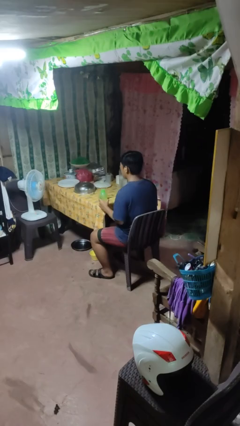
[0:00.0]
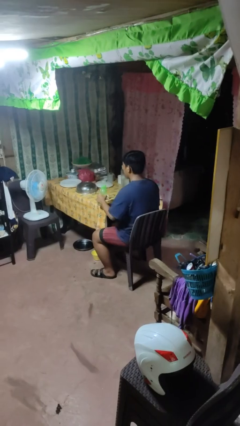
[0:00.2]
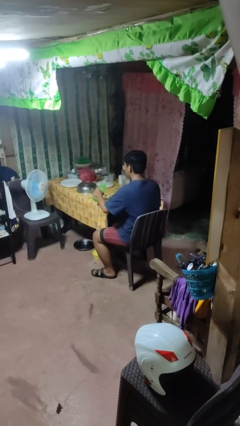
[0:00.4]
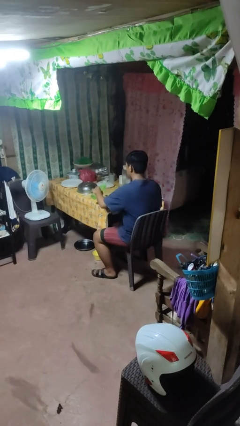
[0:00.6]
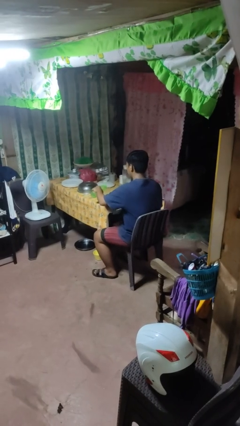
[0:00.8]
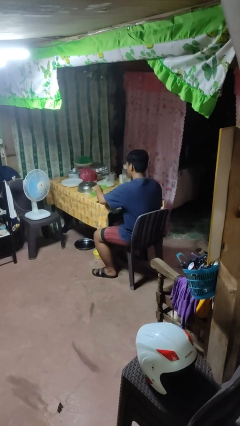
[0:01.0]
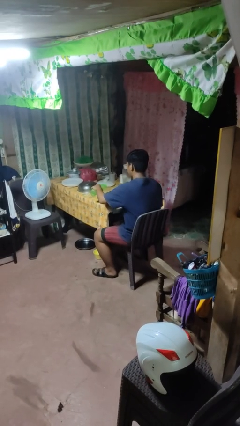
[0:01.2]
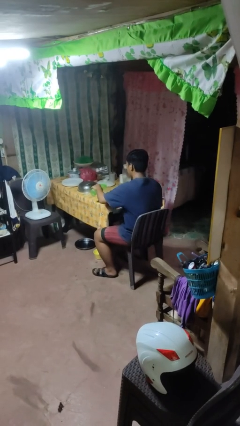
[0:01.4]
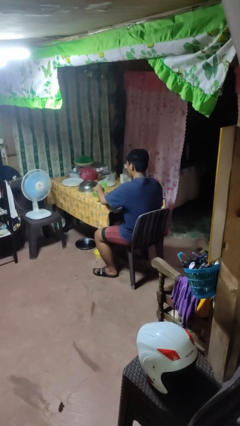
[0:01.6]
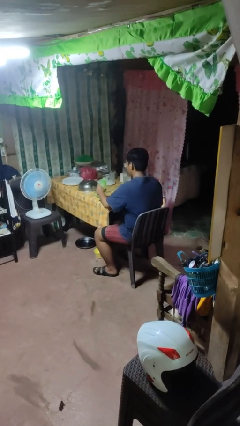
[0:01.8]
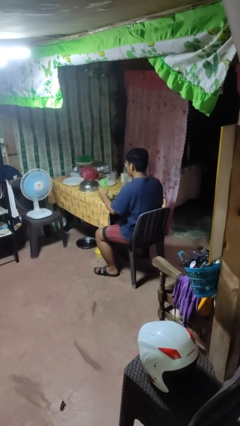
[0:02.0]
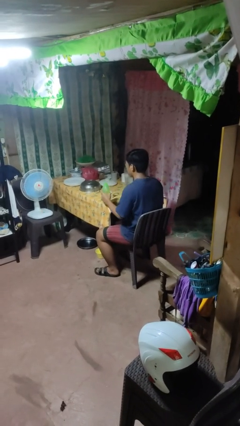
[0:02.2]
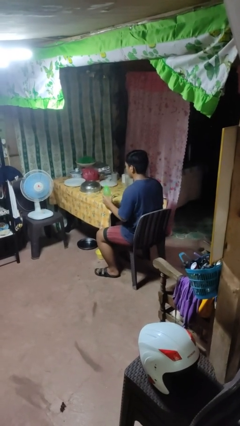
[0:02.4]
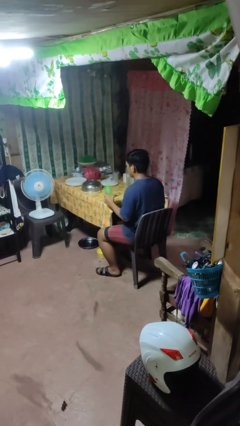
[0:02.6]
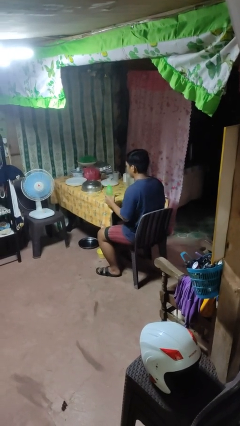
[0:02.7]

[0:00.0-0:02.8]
person pours liquid into cup

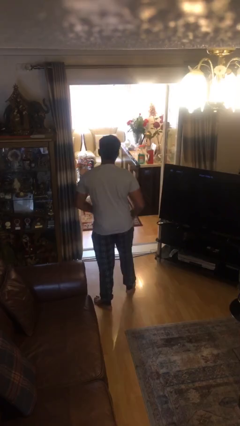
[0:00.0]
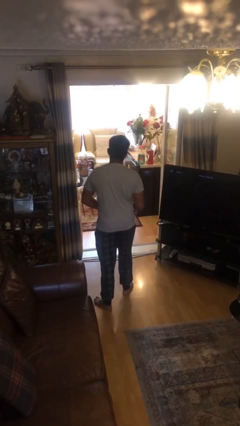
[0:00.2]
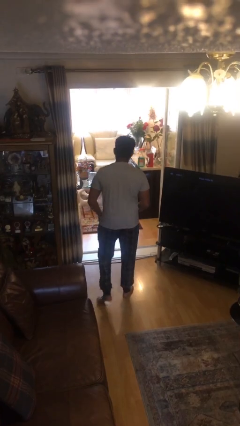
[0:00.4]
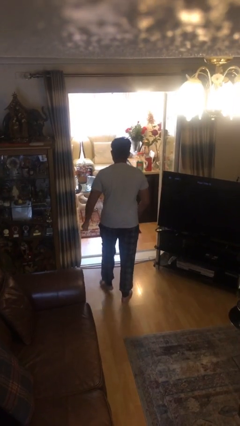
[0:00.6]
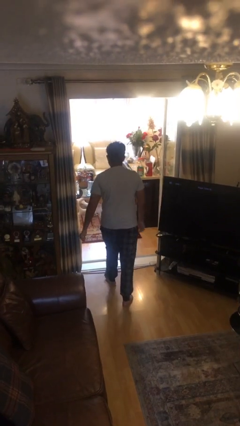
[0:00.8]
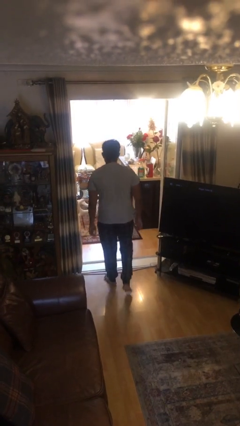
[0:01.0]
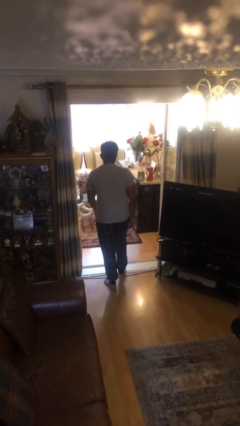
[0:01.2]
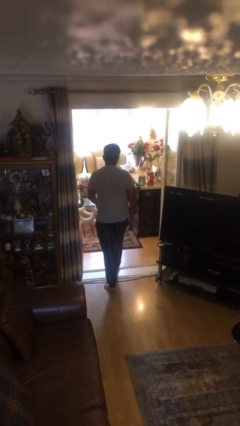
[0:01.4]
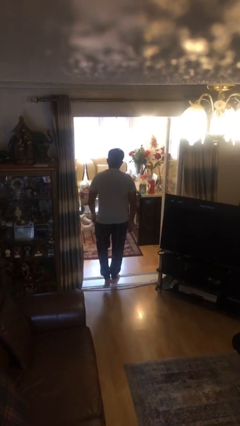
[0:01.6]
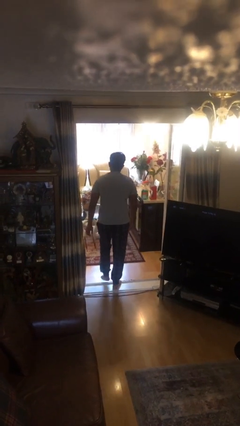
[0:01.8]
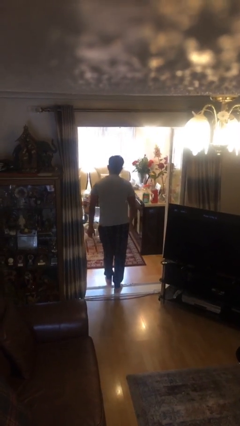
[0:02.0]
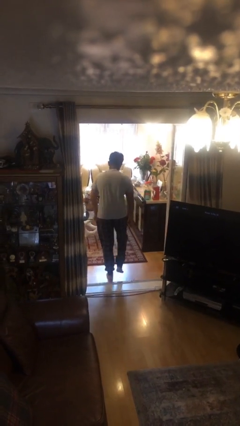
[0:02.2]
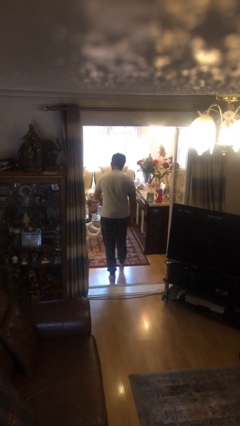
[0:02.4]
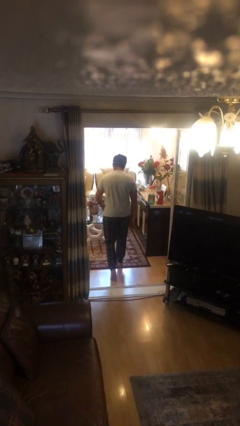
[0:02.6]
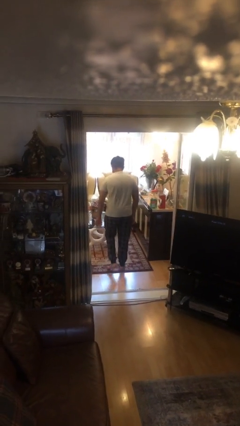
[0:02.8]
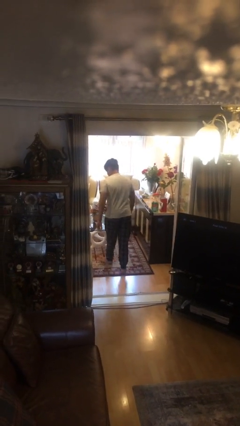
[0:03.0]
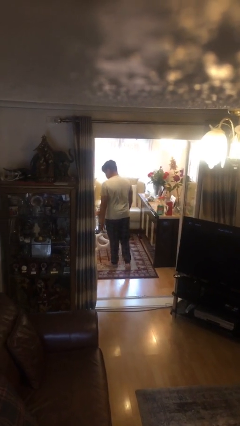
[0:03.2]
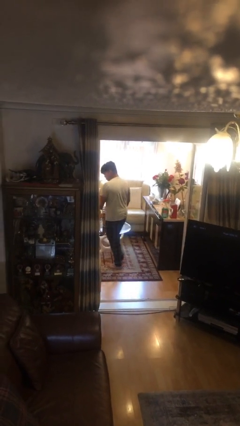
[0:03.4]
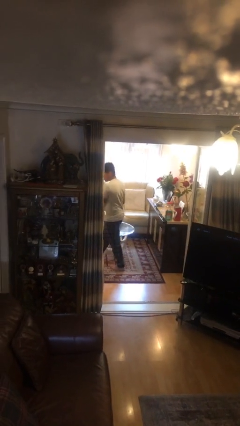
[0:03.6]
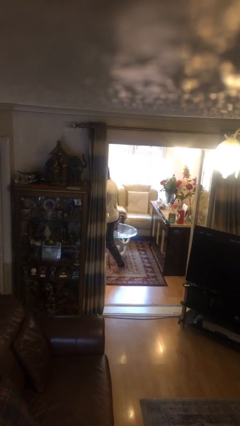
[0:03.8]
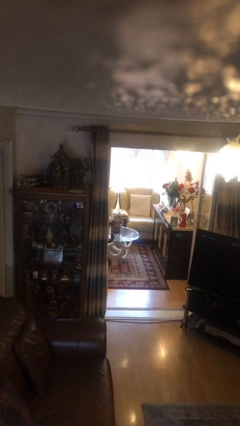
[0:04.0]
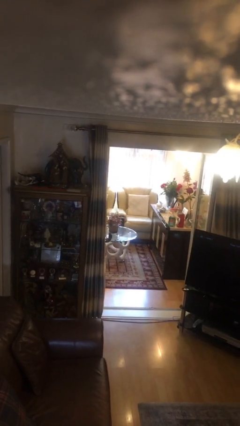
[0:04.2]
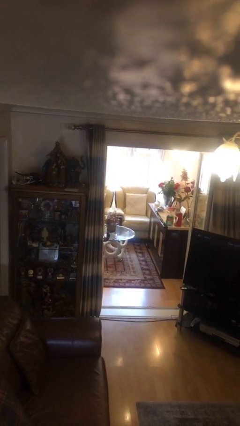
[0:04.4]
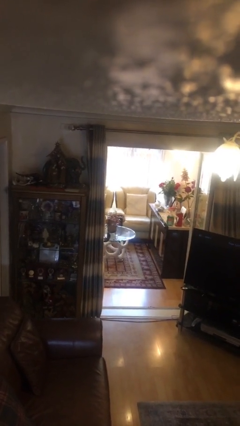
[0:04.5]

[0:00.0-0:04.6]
person exits scene through structure

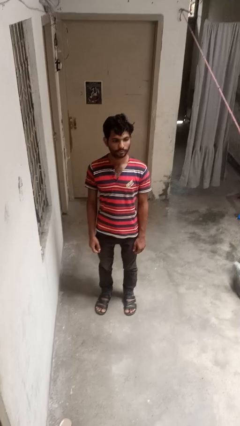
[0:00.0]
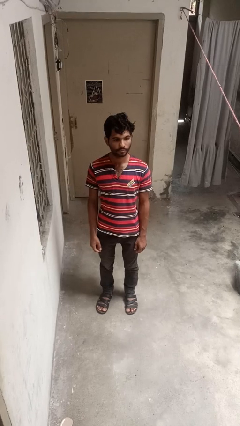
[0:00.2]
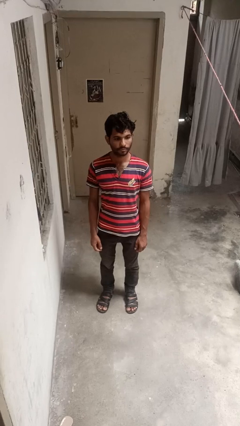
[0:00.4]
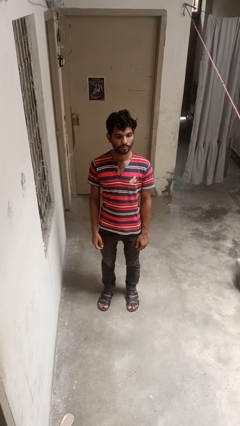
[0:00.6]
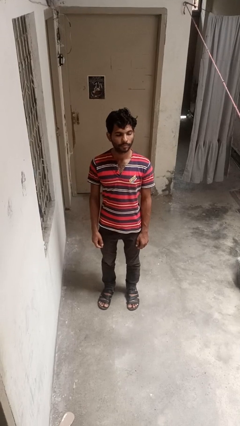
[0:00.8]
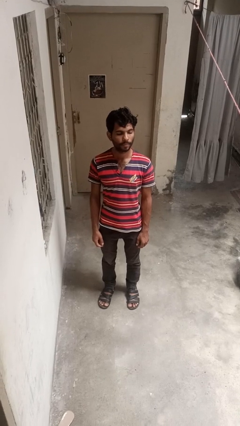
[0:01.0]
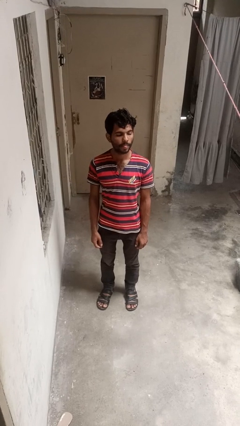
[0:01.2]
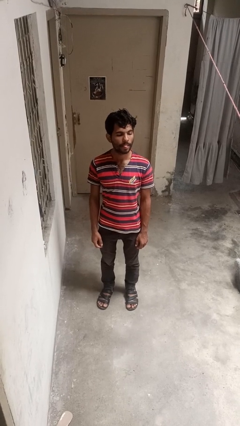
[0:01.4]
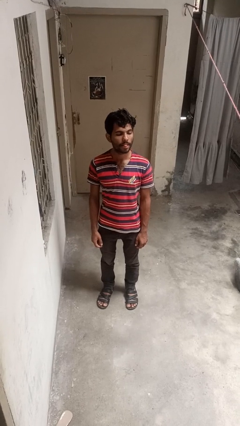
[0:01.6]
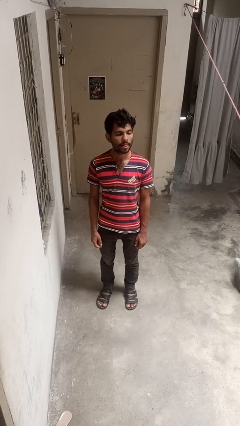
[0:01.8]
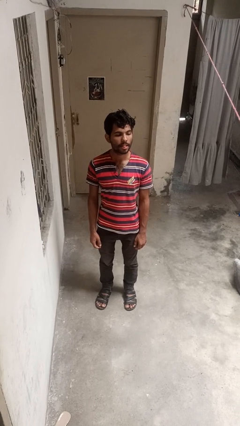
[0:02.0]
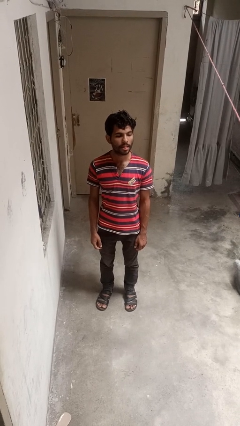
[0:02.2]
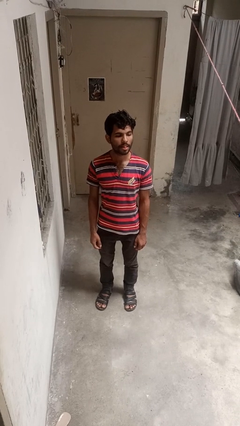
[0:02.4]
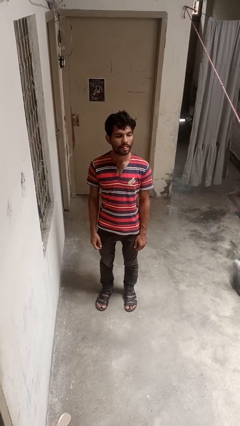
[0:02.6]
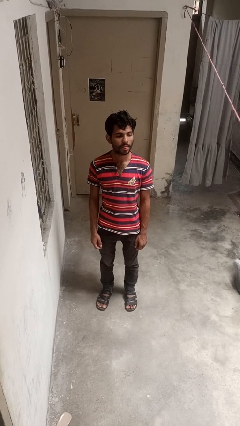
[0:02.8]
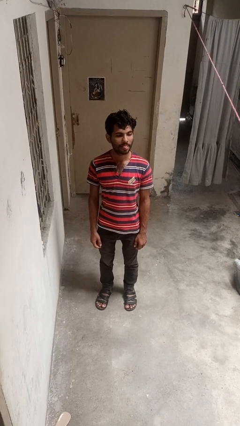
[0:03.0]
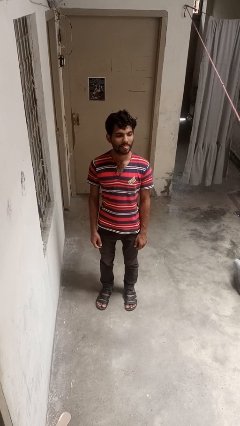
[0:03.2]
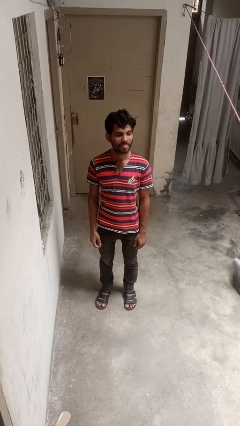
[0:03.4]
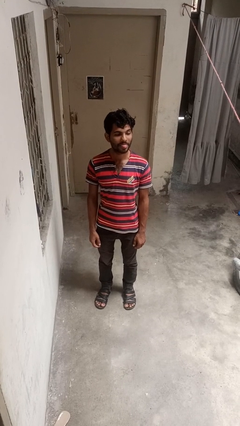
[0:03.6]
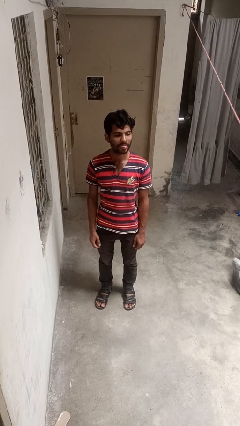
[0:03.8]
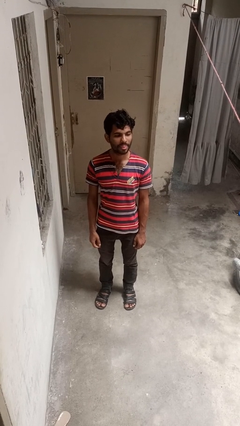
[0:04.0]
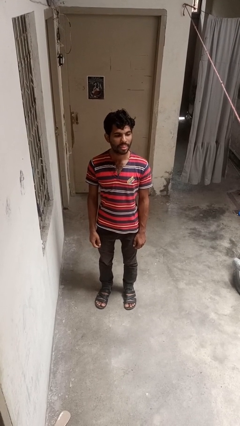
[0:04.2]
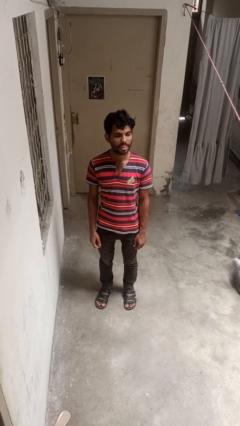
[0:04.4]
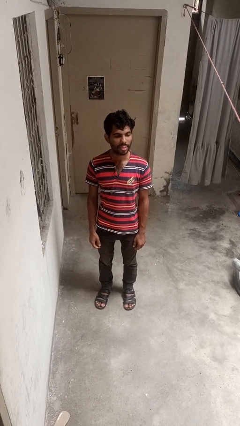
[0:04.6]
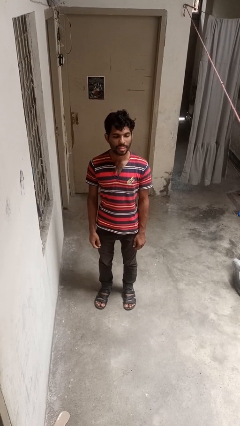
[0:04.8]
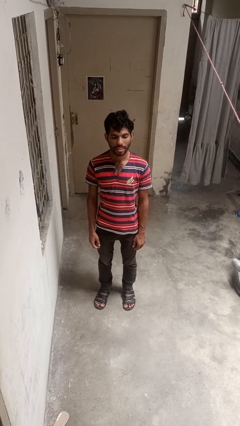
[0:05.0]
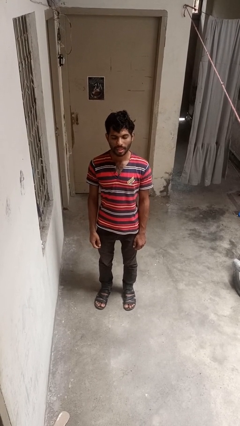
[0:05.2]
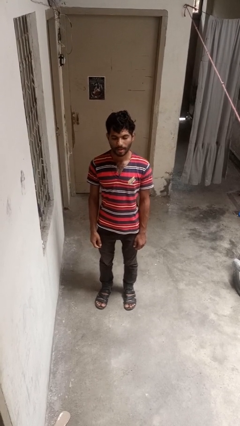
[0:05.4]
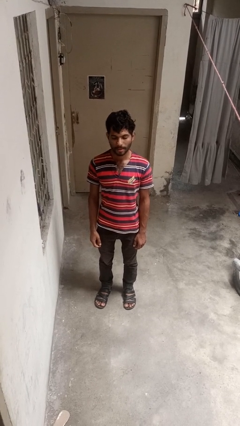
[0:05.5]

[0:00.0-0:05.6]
person sticks out tongue

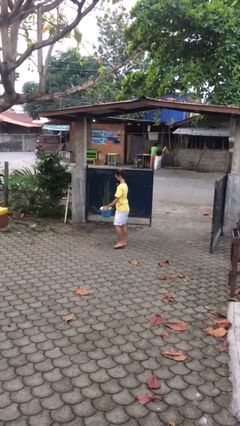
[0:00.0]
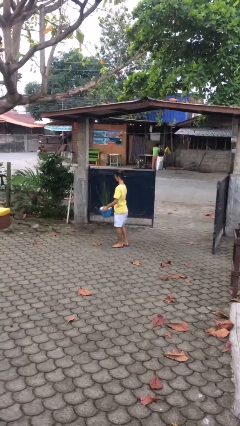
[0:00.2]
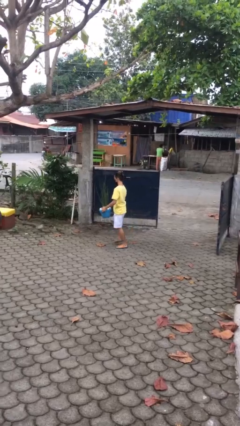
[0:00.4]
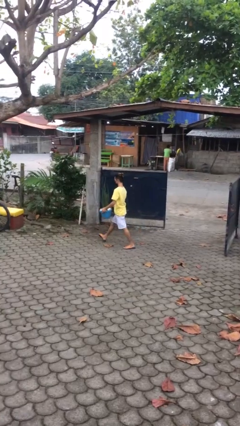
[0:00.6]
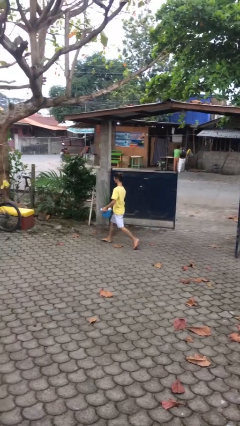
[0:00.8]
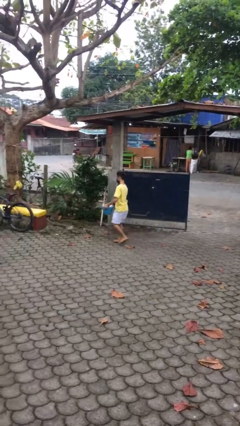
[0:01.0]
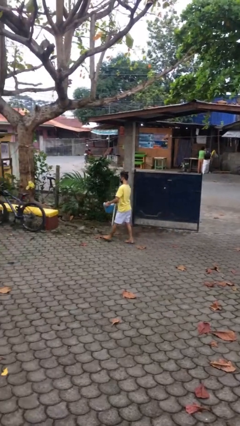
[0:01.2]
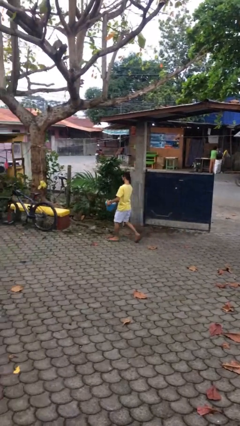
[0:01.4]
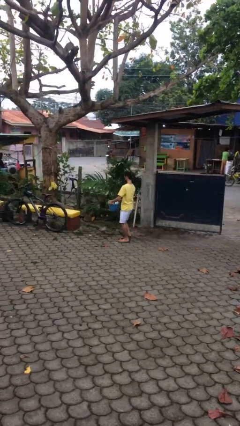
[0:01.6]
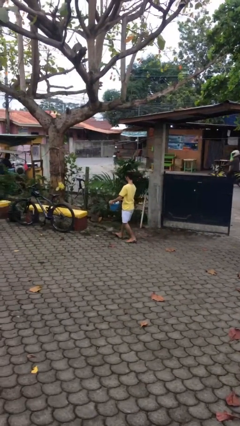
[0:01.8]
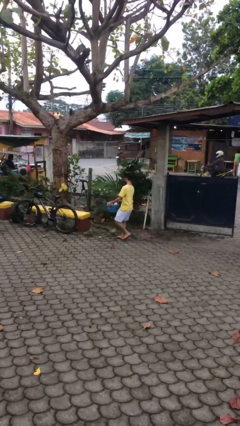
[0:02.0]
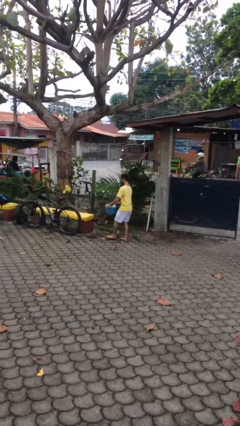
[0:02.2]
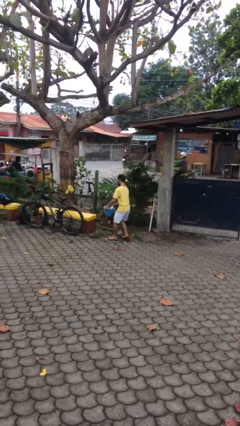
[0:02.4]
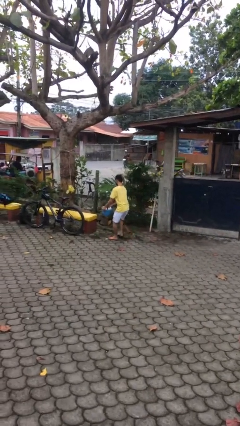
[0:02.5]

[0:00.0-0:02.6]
person carries heavy object

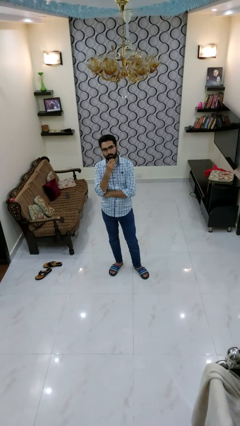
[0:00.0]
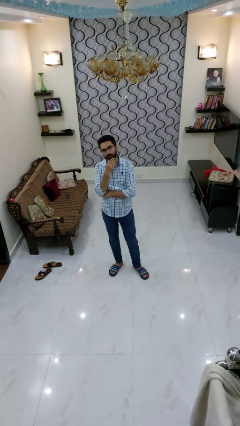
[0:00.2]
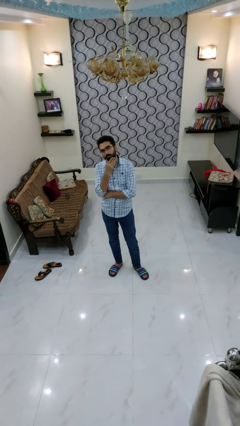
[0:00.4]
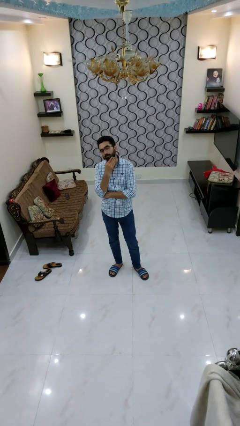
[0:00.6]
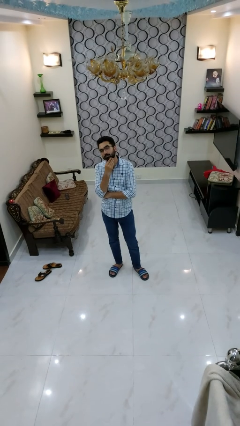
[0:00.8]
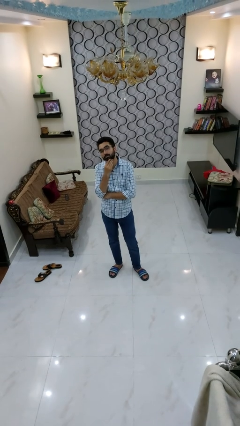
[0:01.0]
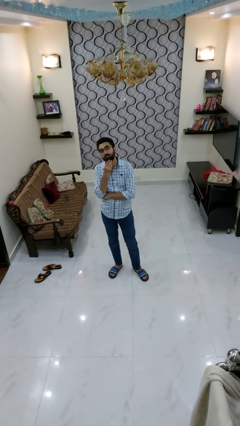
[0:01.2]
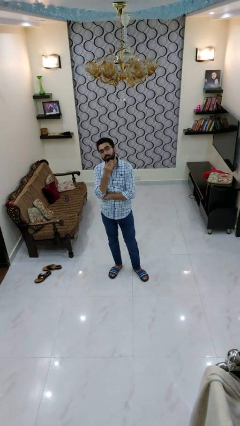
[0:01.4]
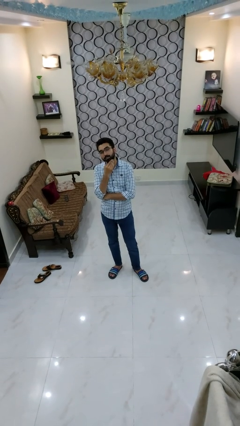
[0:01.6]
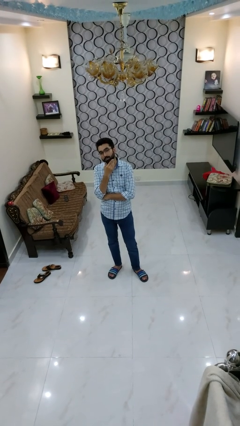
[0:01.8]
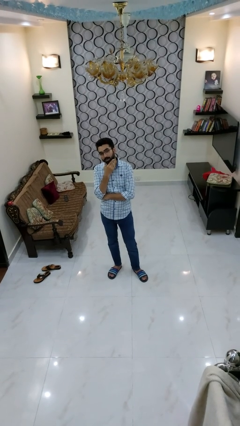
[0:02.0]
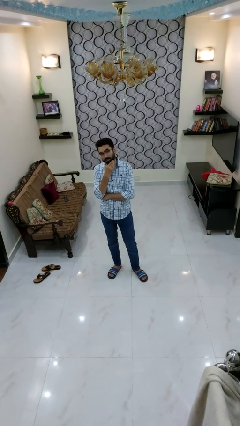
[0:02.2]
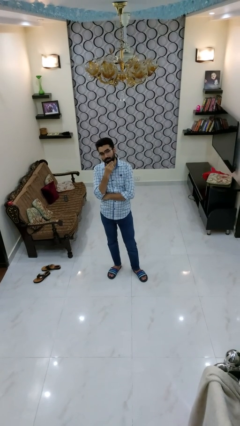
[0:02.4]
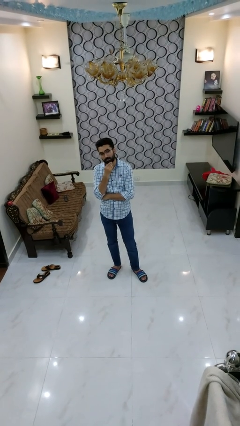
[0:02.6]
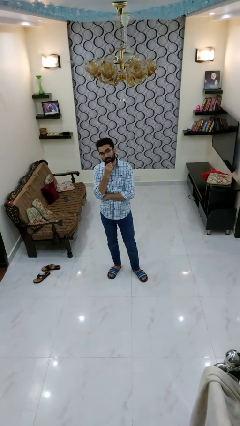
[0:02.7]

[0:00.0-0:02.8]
person strokes chin
